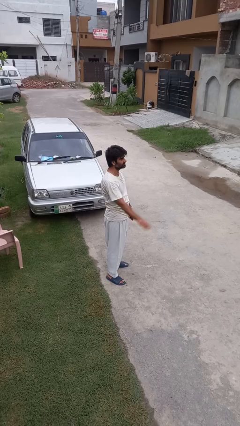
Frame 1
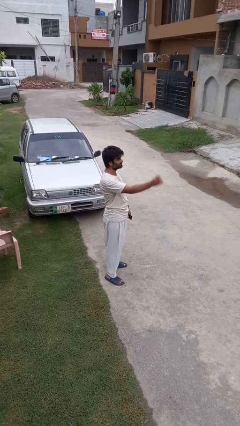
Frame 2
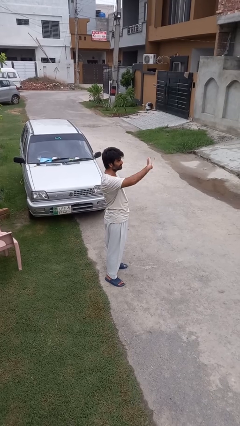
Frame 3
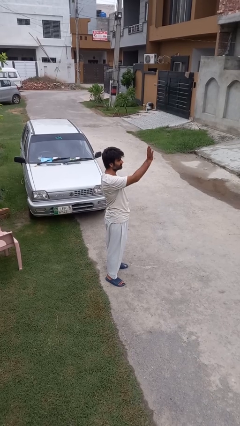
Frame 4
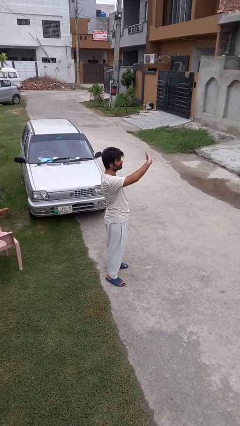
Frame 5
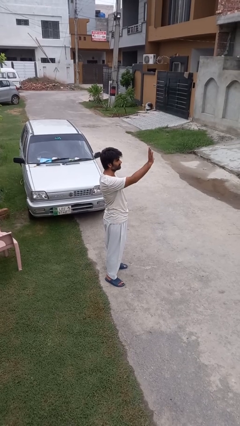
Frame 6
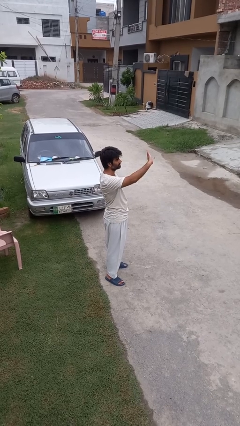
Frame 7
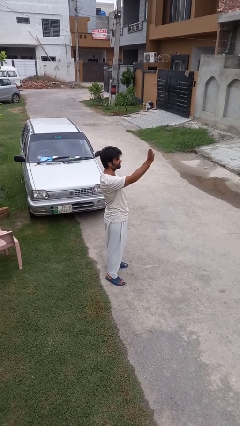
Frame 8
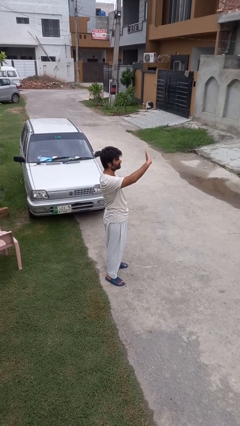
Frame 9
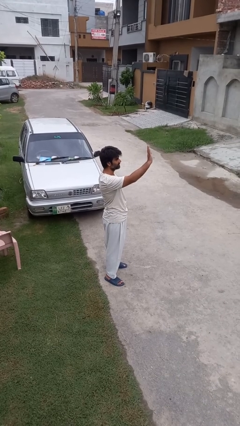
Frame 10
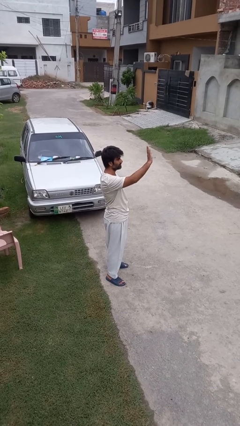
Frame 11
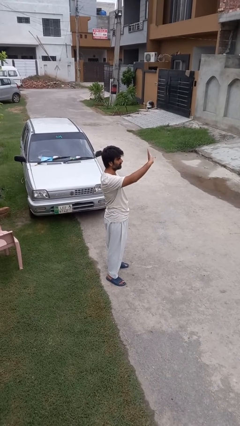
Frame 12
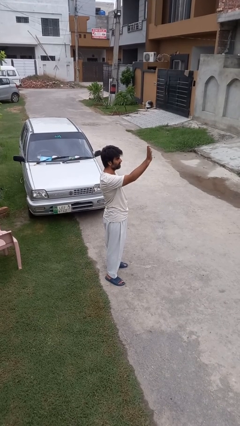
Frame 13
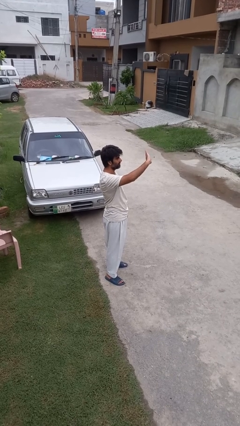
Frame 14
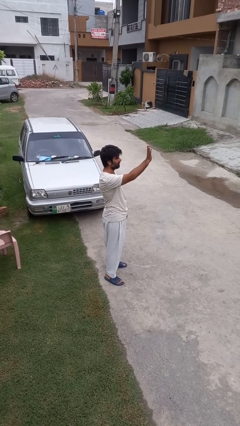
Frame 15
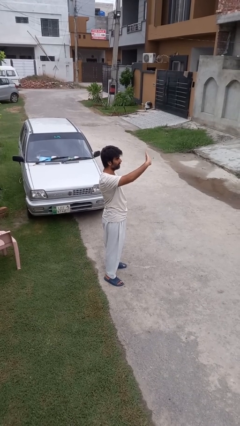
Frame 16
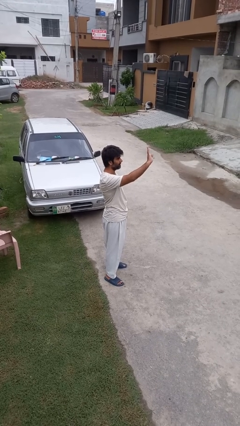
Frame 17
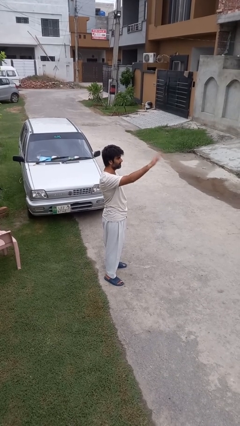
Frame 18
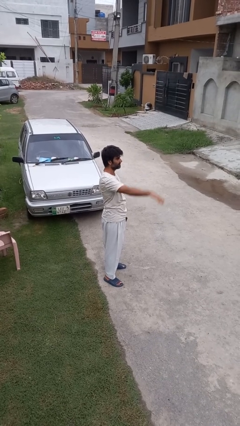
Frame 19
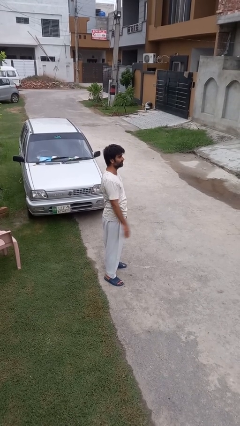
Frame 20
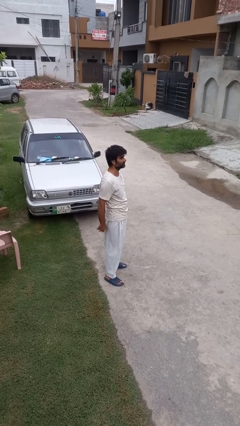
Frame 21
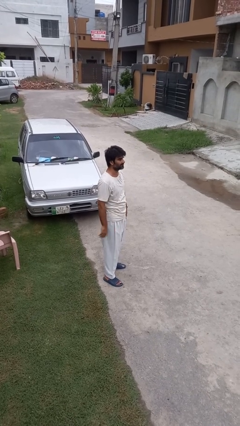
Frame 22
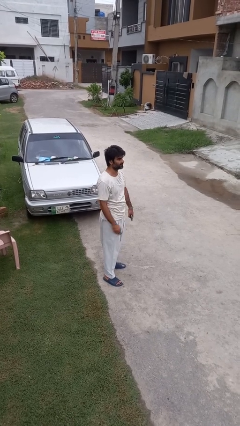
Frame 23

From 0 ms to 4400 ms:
person waves at person

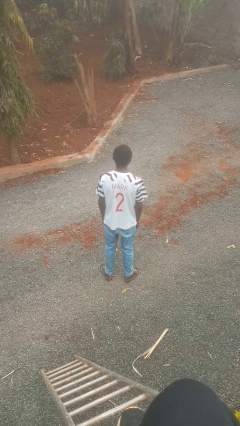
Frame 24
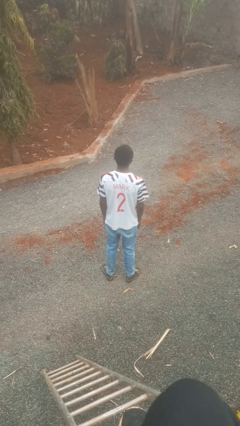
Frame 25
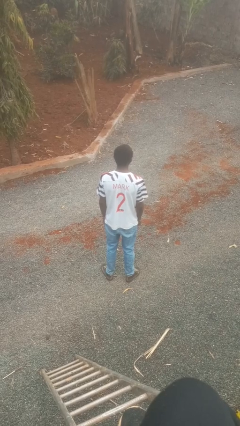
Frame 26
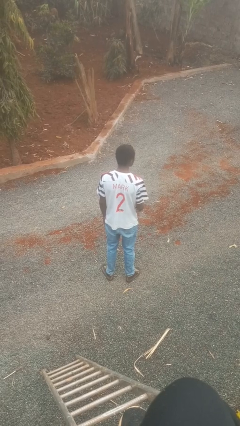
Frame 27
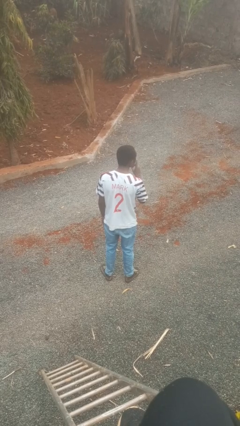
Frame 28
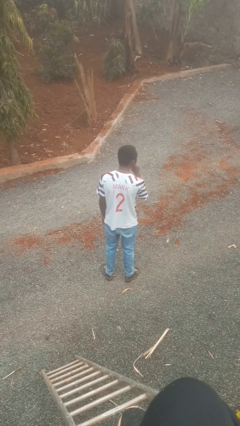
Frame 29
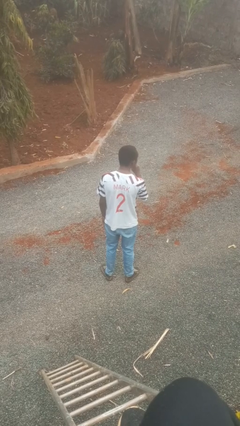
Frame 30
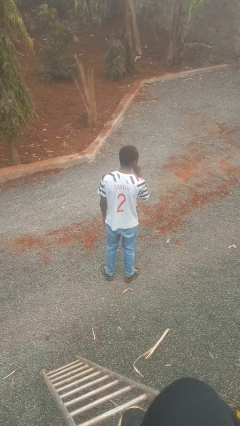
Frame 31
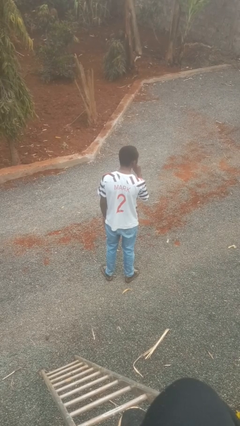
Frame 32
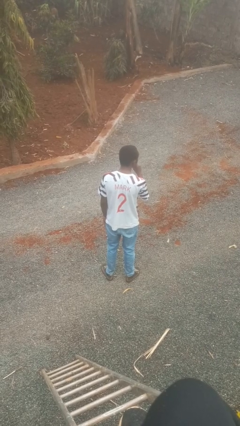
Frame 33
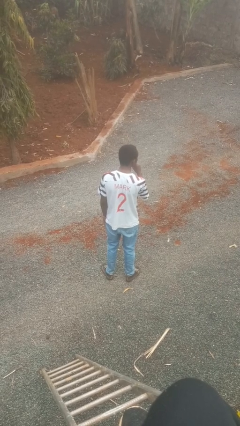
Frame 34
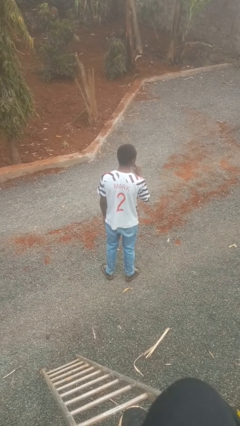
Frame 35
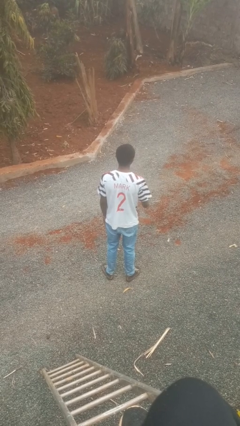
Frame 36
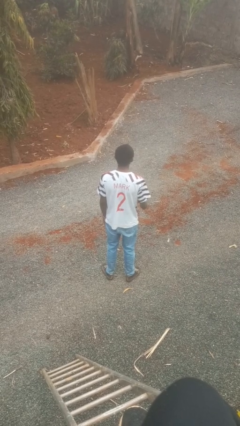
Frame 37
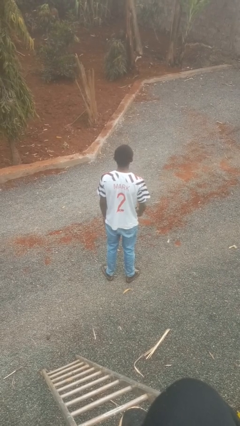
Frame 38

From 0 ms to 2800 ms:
person gestures be quiet

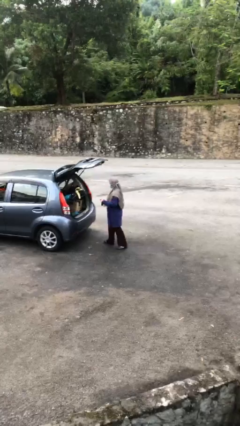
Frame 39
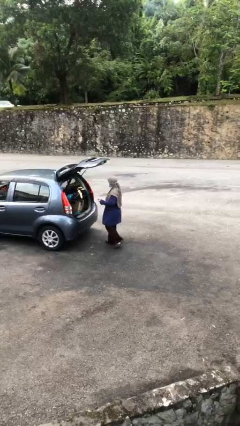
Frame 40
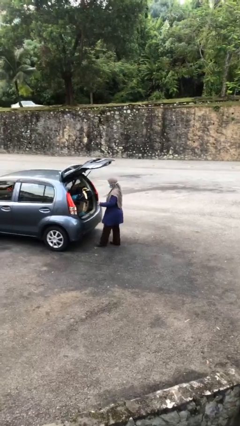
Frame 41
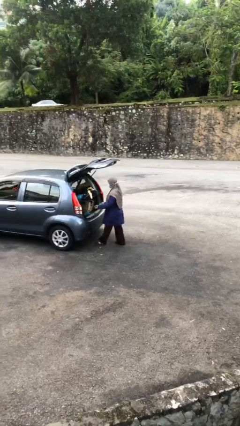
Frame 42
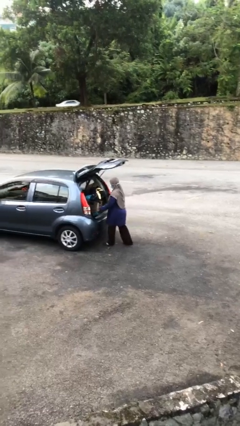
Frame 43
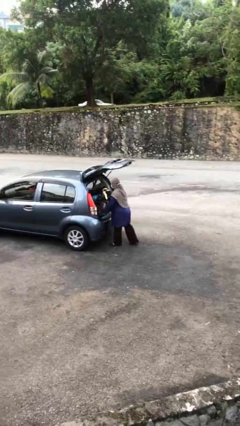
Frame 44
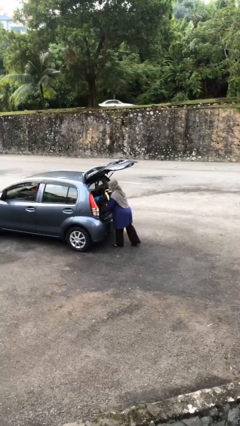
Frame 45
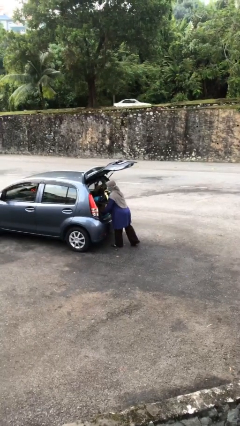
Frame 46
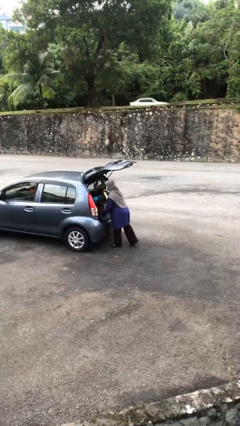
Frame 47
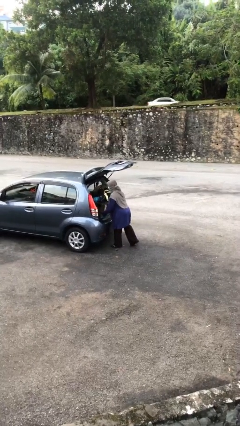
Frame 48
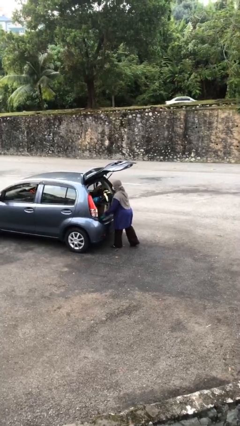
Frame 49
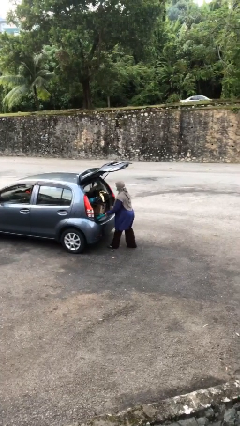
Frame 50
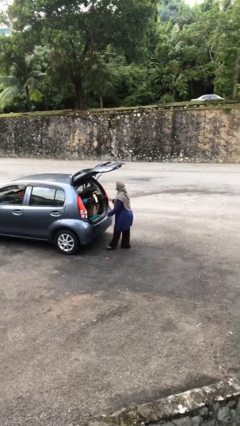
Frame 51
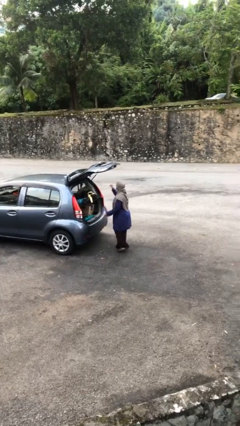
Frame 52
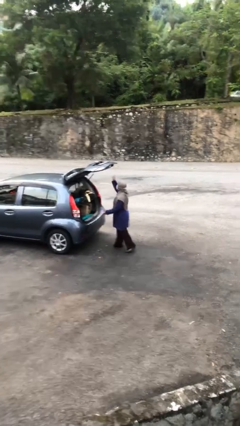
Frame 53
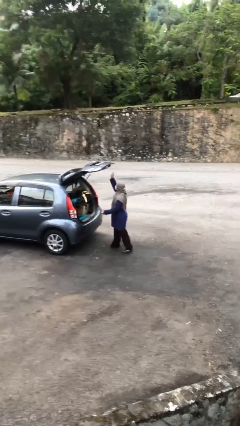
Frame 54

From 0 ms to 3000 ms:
person loads car

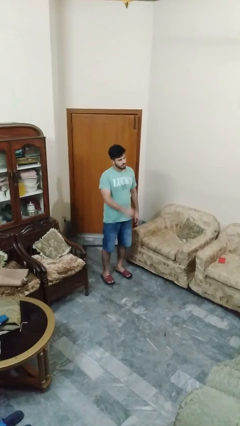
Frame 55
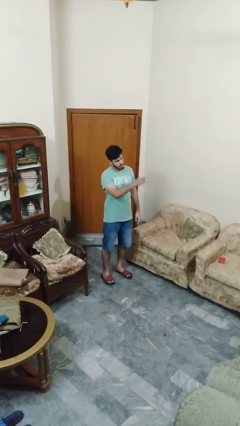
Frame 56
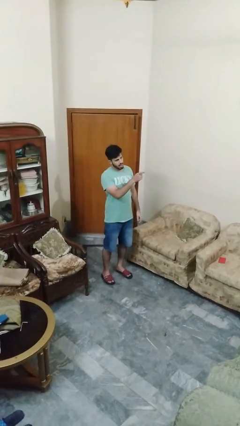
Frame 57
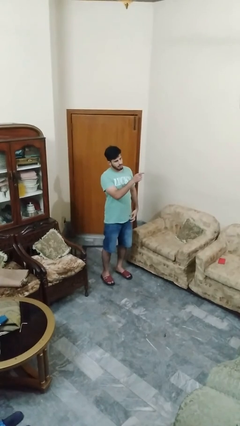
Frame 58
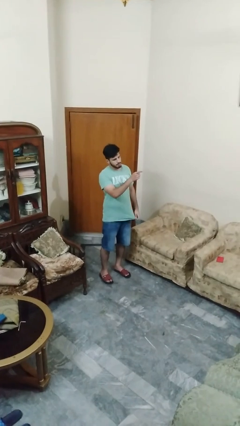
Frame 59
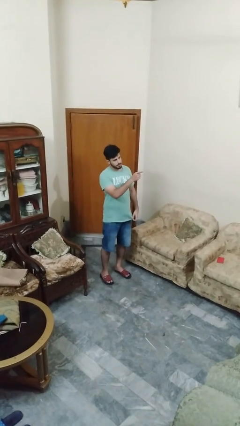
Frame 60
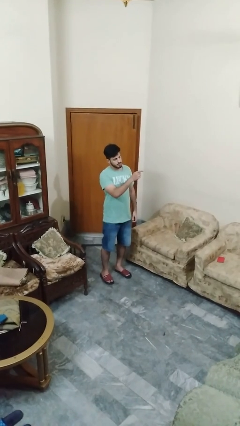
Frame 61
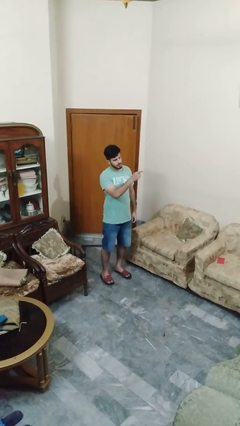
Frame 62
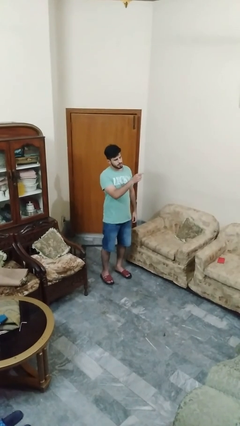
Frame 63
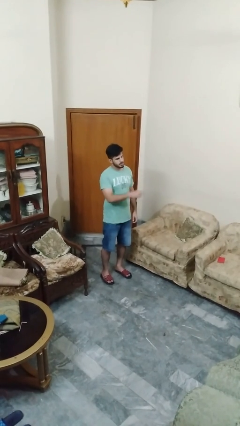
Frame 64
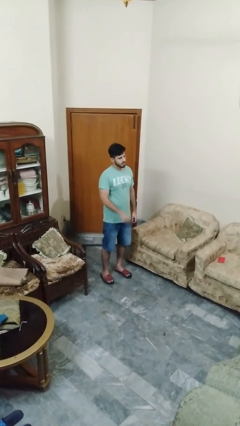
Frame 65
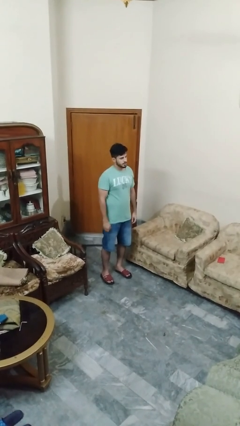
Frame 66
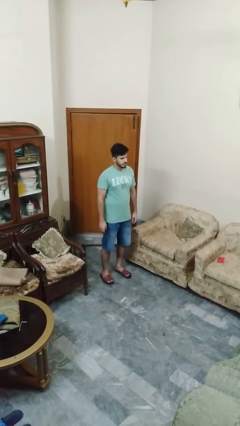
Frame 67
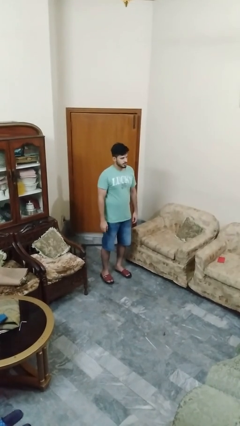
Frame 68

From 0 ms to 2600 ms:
person points at person

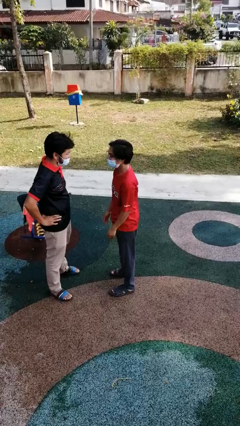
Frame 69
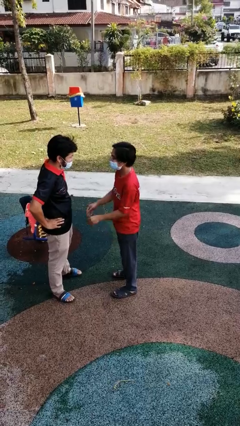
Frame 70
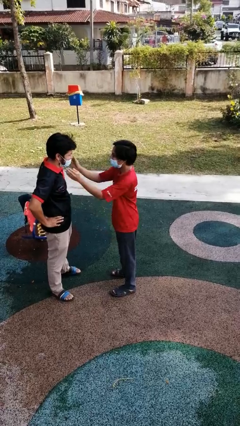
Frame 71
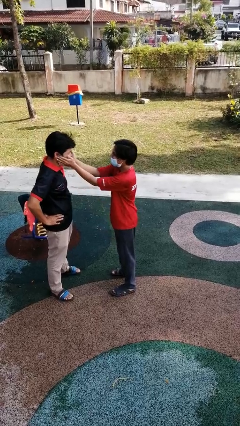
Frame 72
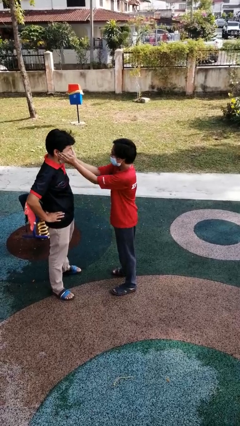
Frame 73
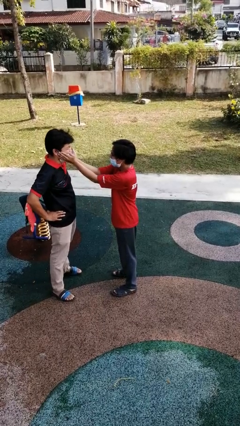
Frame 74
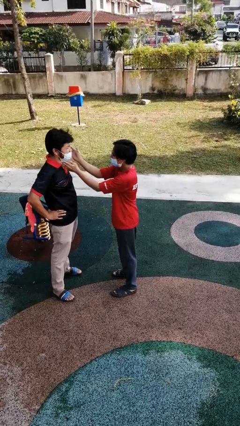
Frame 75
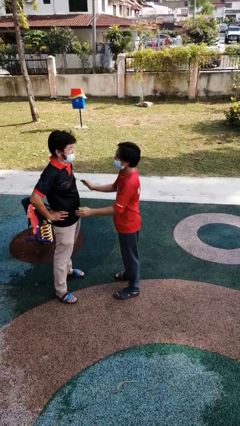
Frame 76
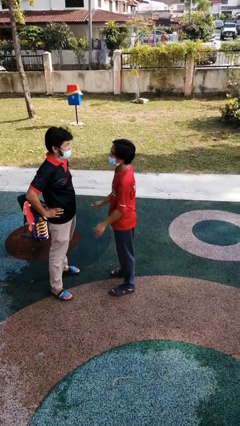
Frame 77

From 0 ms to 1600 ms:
person touches face of person

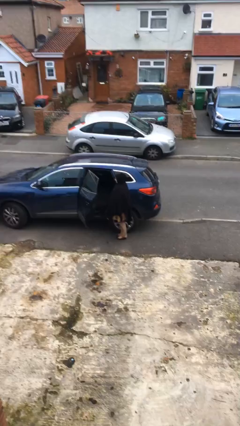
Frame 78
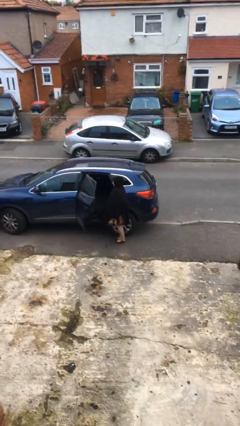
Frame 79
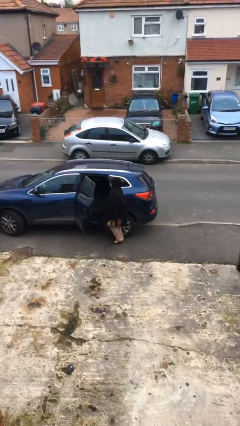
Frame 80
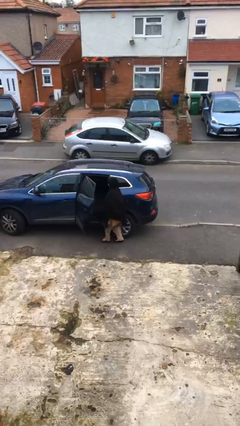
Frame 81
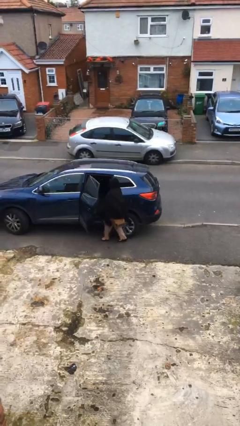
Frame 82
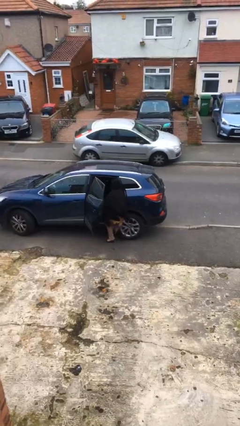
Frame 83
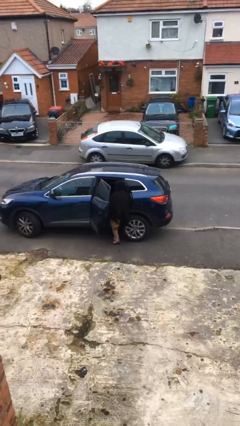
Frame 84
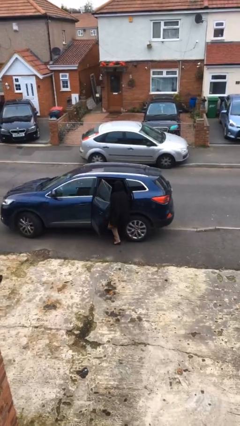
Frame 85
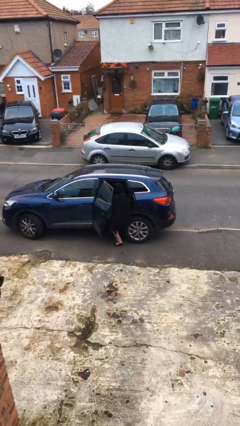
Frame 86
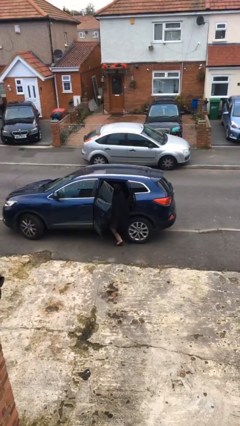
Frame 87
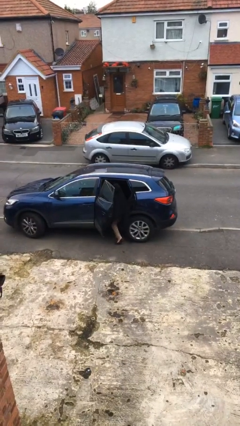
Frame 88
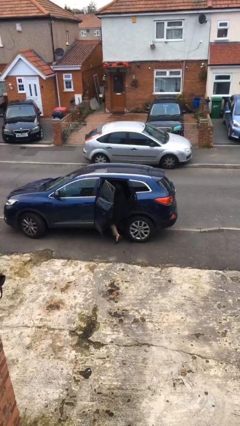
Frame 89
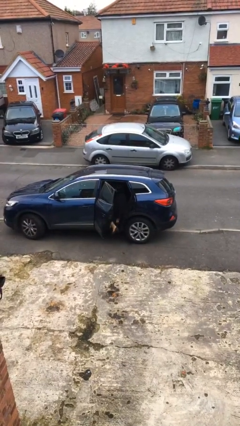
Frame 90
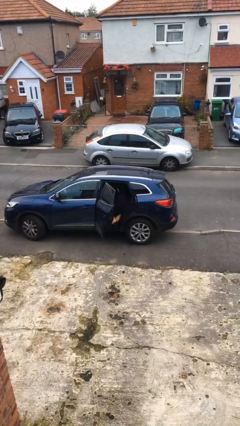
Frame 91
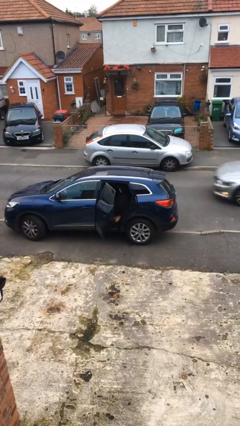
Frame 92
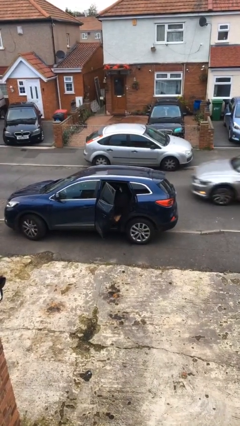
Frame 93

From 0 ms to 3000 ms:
person enters car
